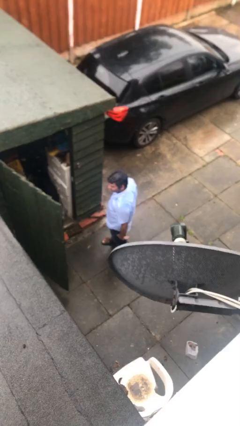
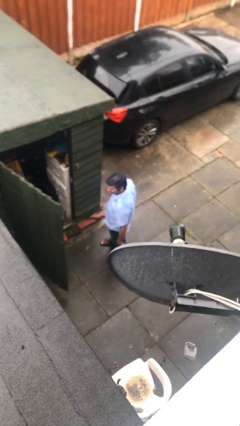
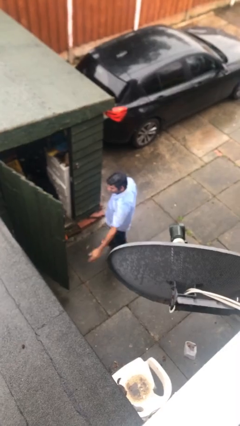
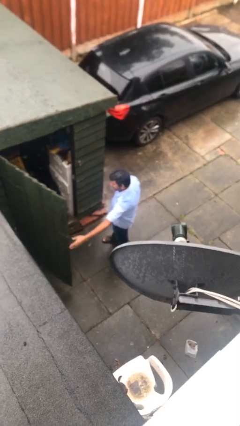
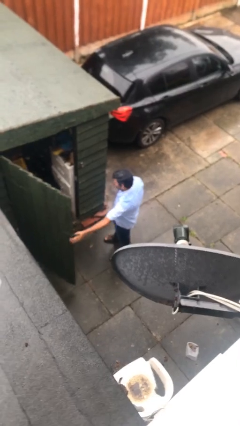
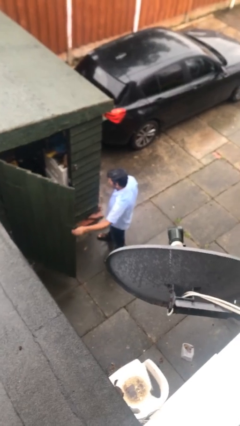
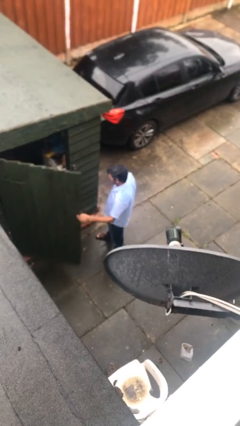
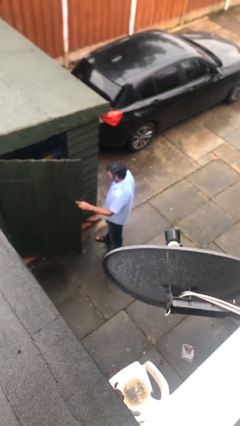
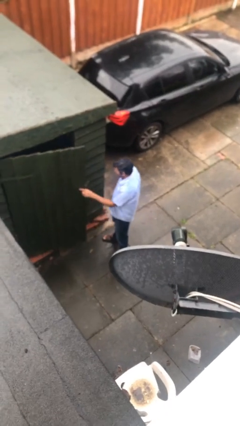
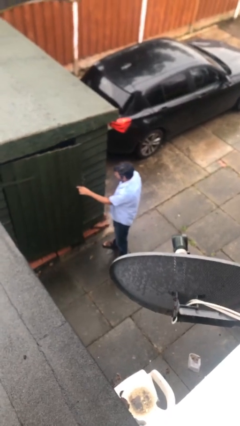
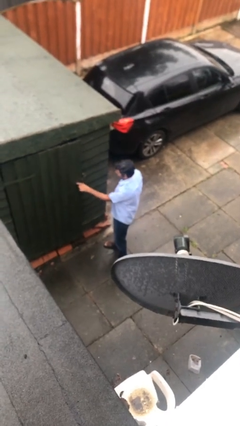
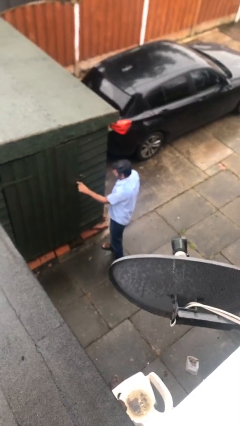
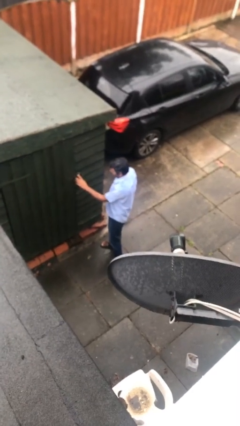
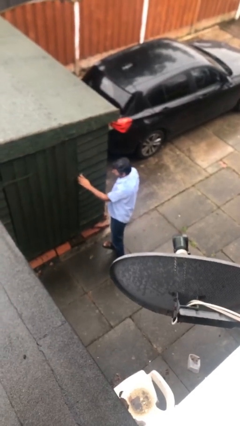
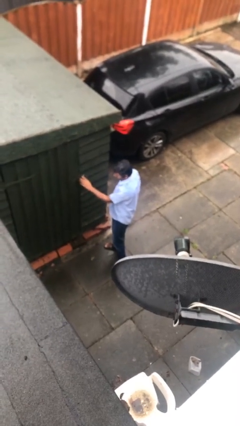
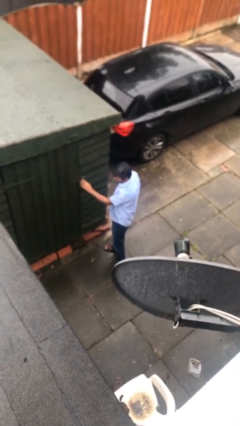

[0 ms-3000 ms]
person closes facility door

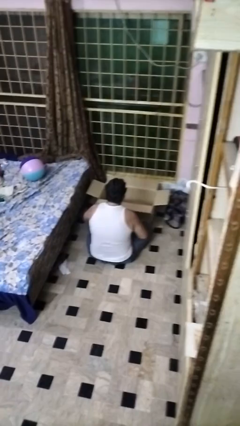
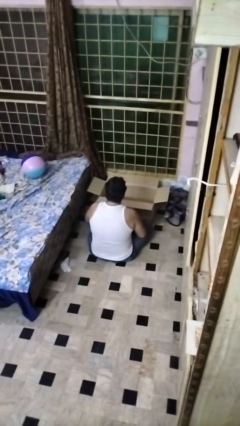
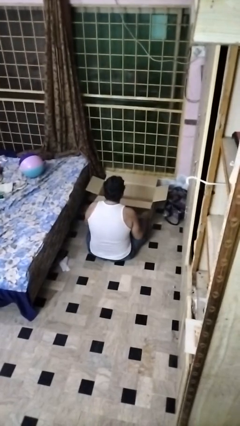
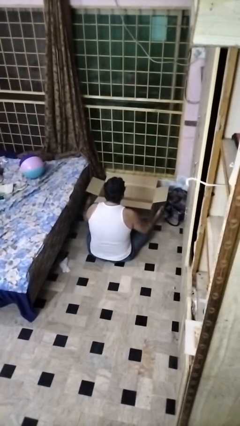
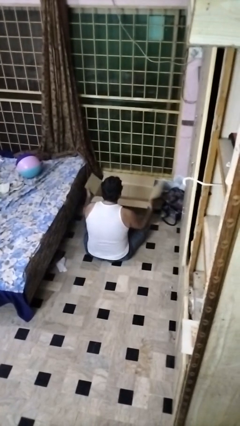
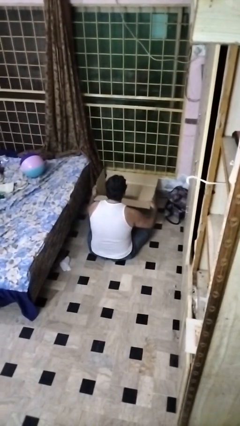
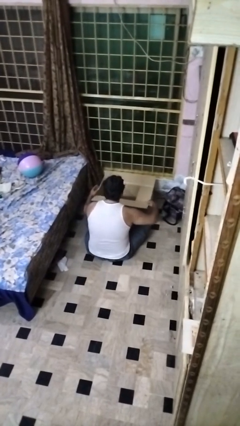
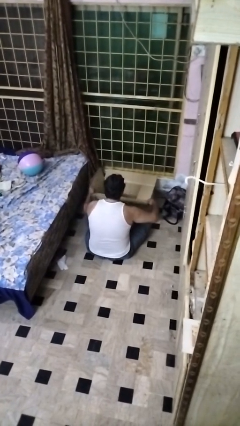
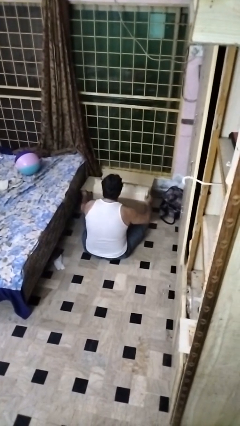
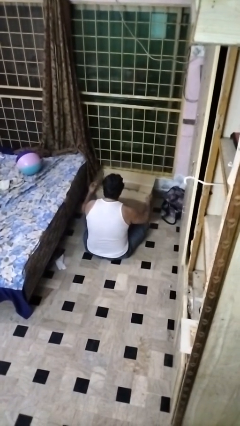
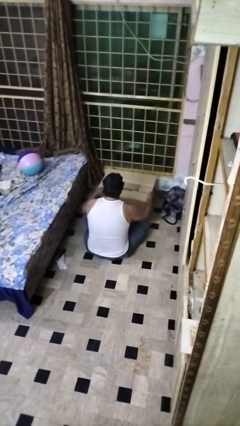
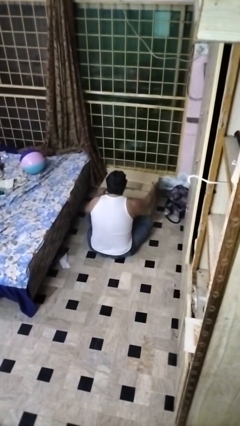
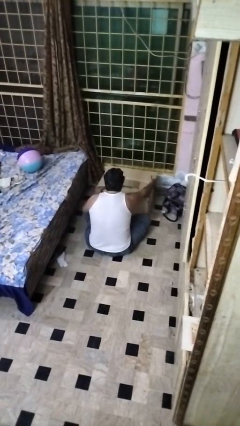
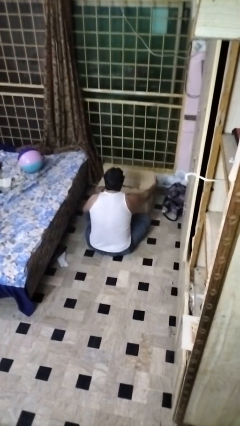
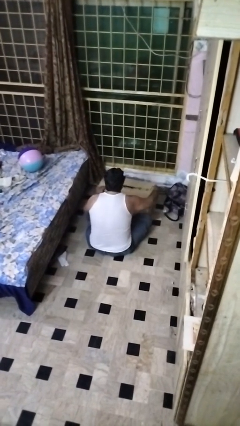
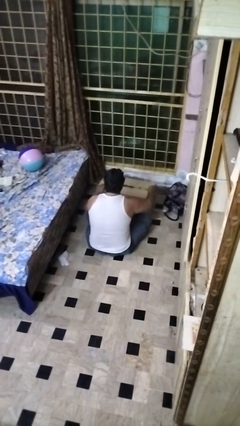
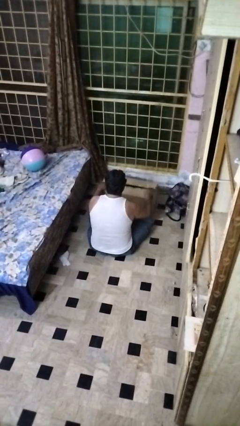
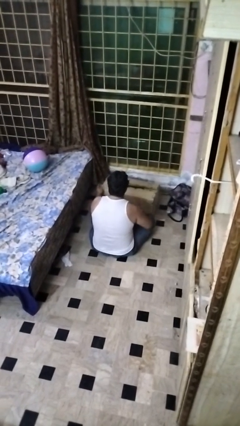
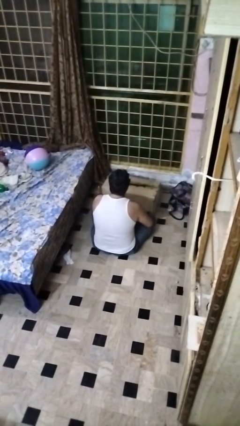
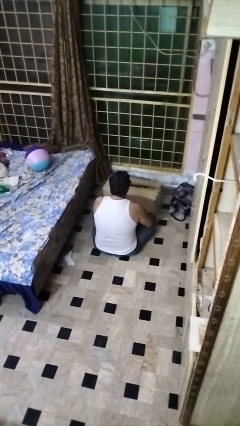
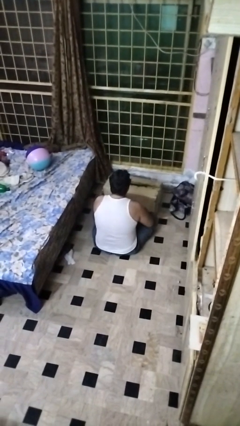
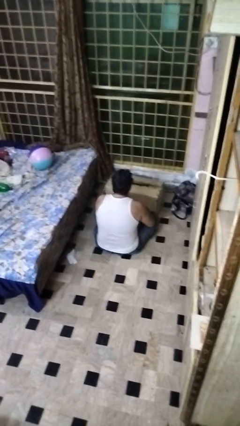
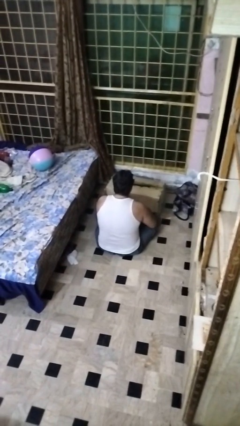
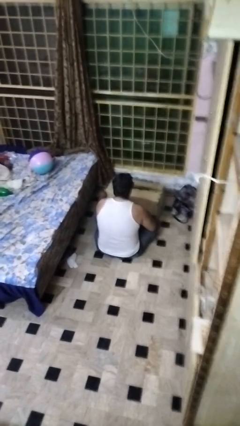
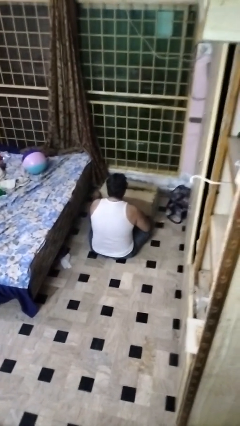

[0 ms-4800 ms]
person closes box

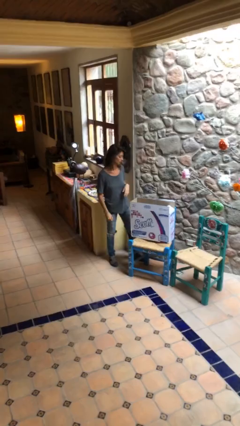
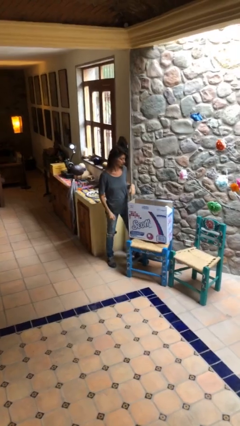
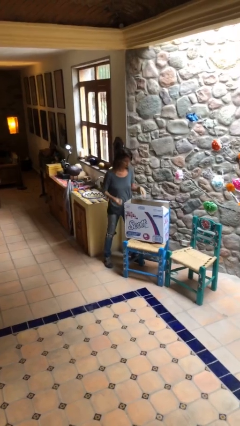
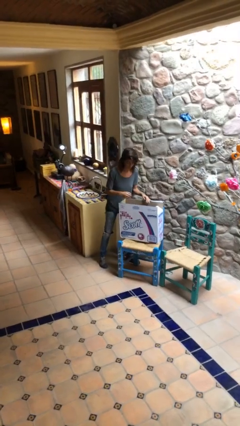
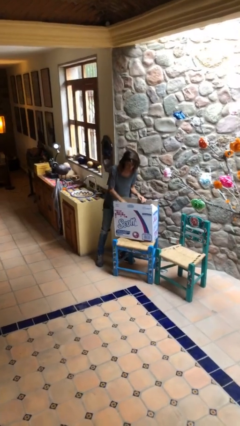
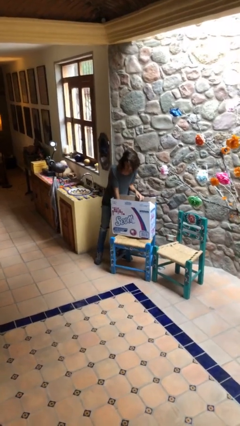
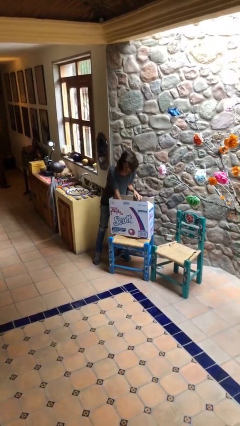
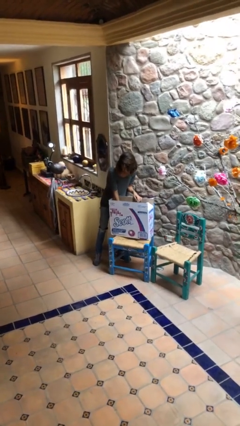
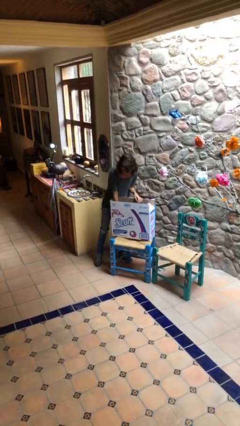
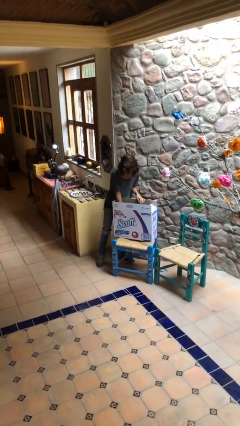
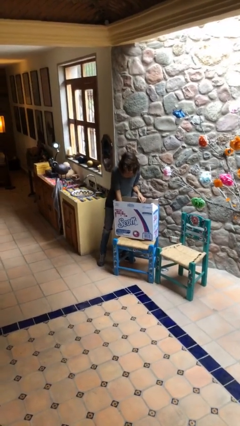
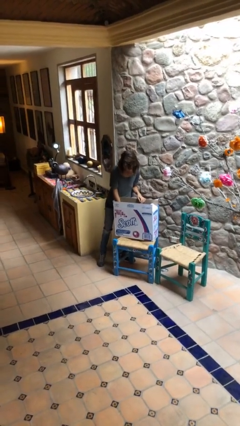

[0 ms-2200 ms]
person searches in box

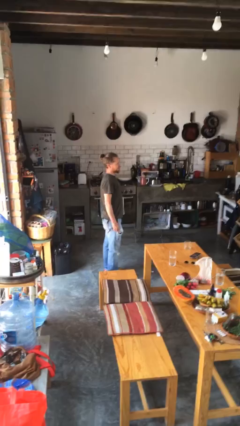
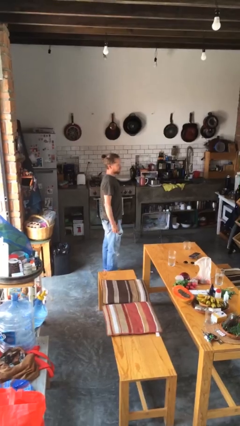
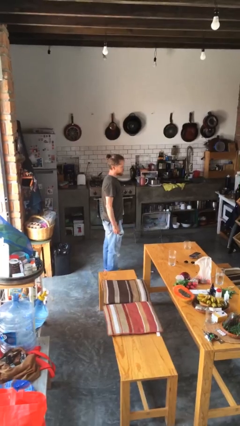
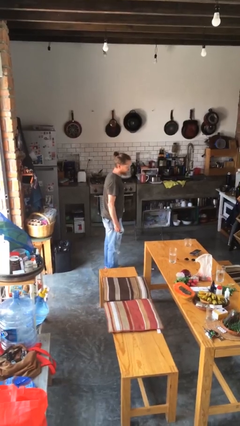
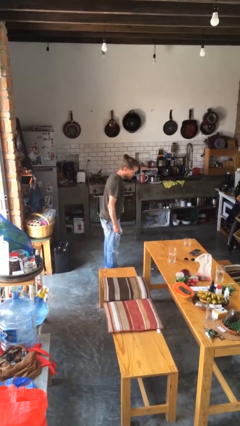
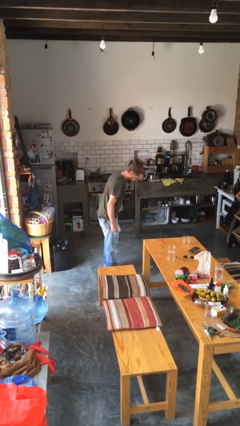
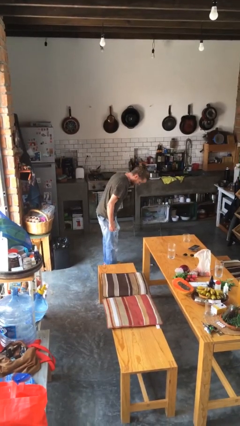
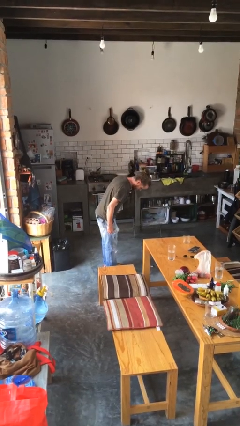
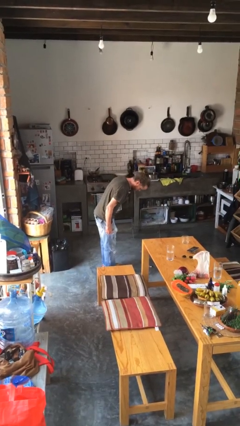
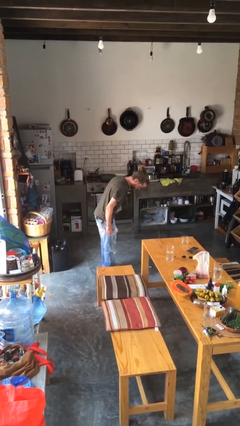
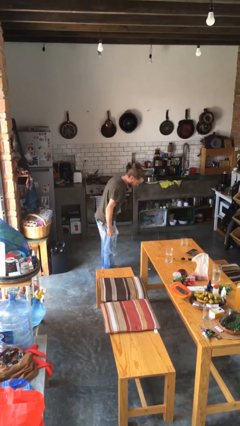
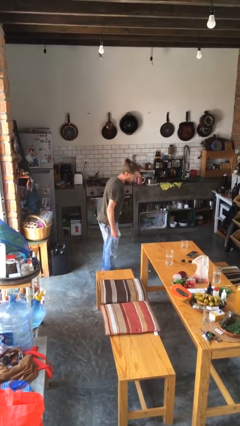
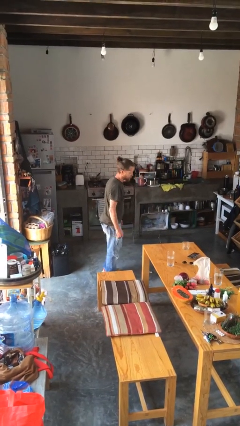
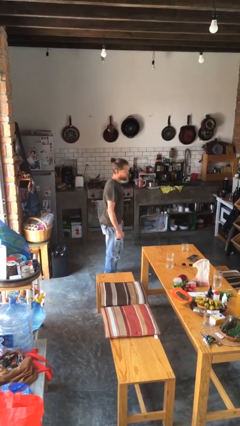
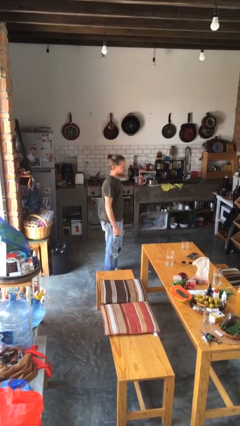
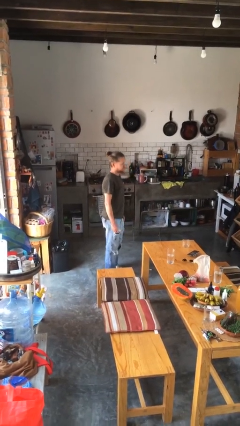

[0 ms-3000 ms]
person bows

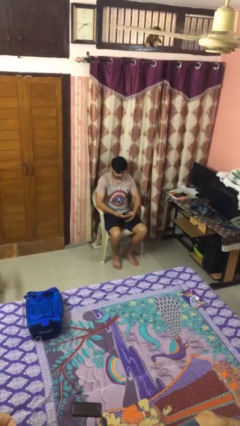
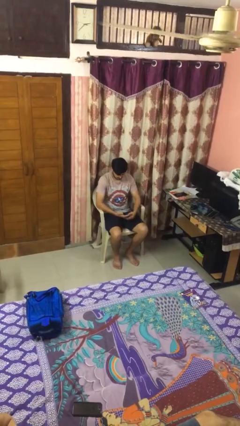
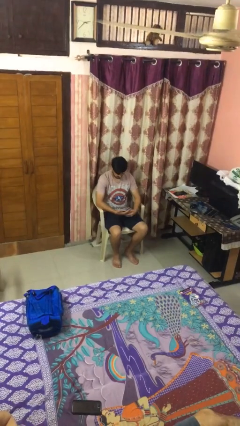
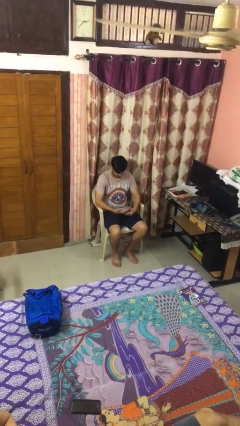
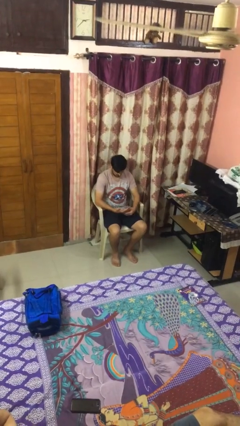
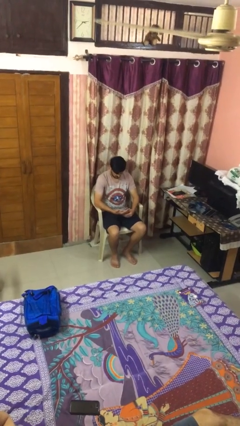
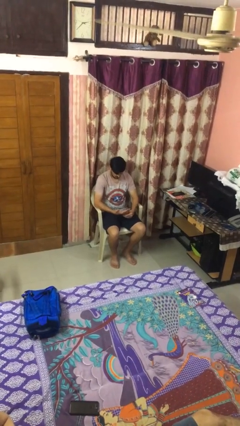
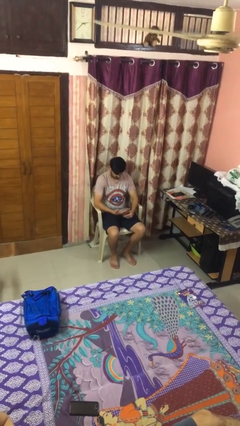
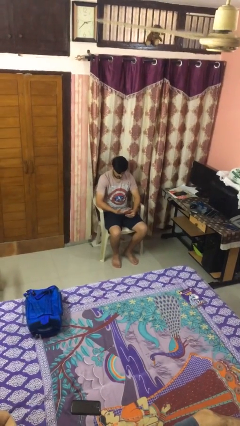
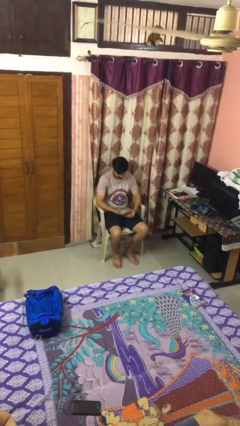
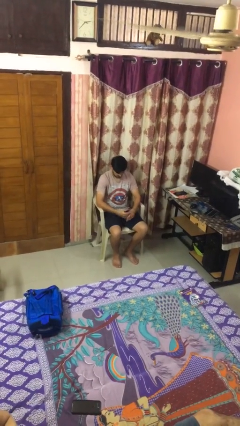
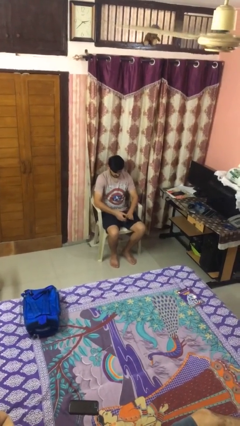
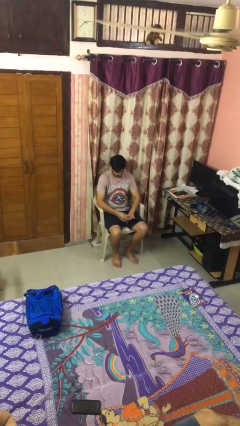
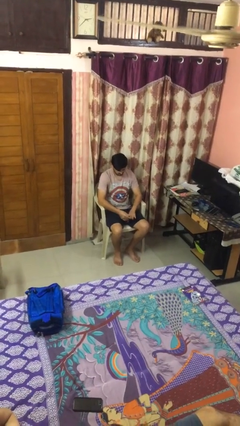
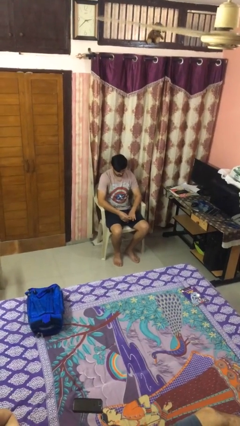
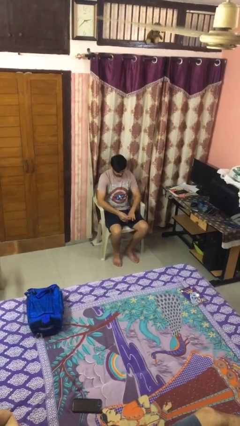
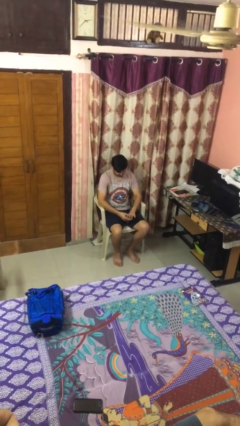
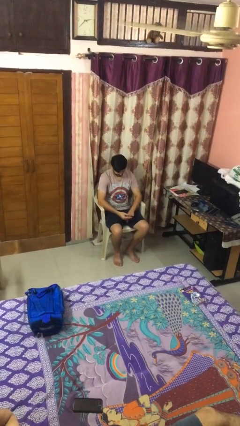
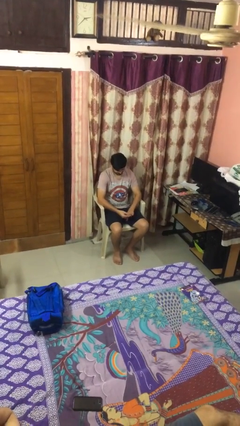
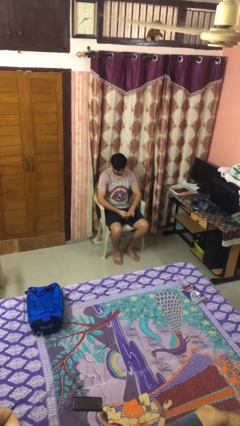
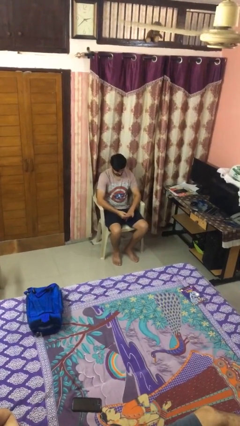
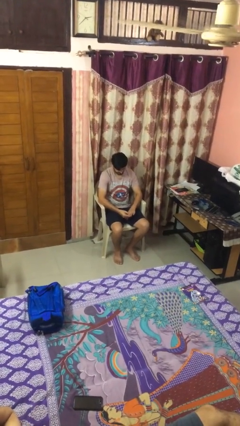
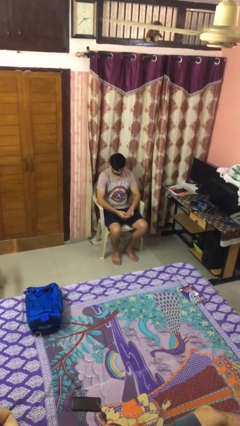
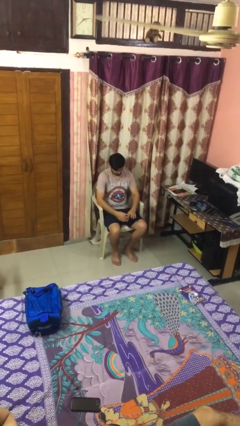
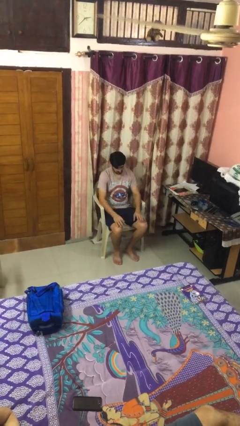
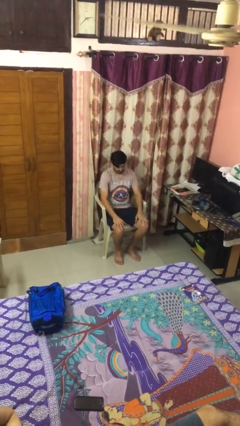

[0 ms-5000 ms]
person looks at hands in lap
